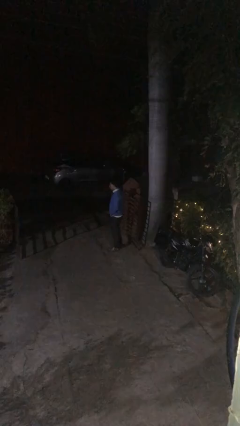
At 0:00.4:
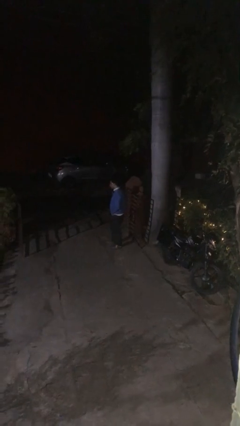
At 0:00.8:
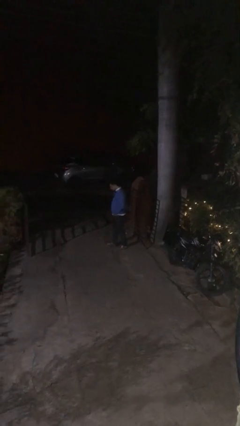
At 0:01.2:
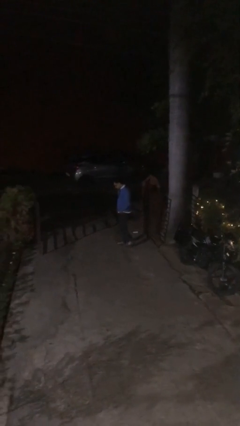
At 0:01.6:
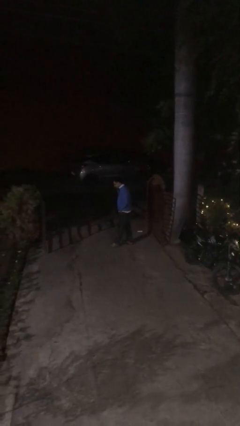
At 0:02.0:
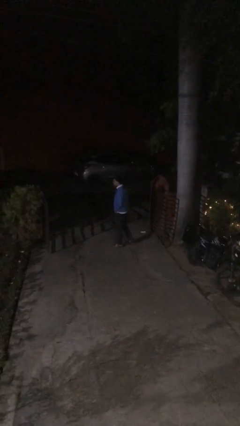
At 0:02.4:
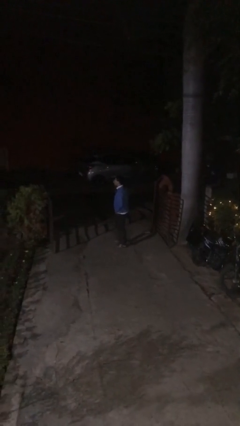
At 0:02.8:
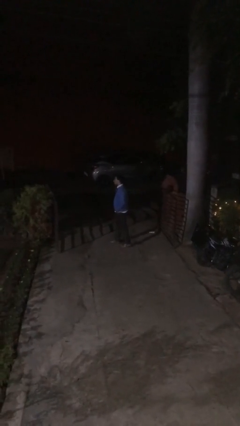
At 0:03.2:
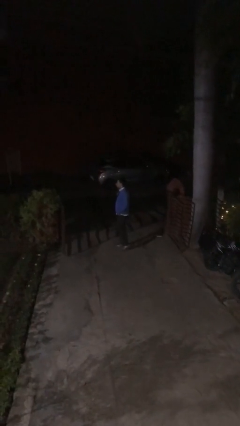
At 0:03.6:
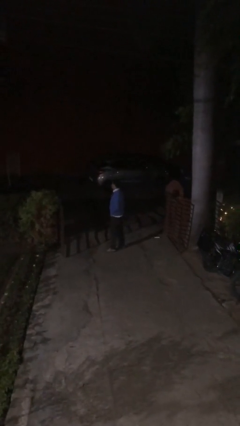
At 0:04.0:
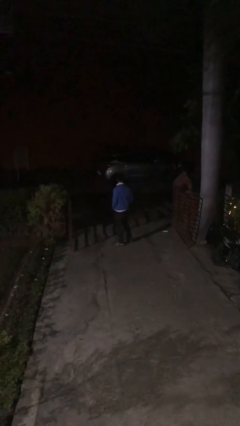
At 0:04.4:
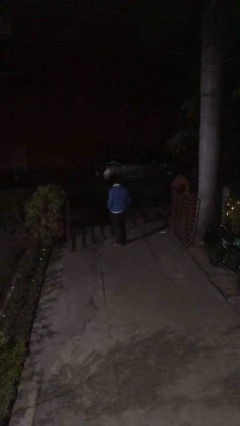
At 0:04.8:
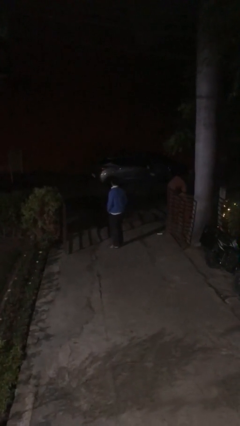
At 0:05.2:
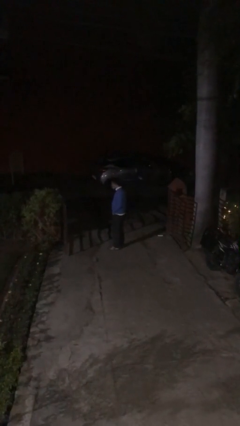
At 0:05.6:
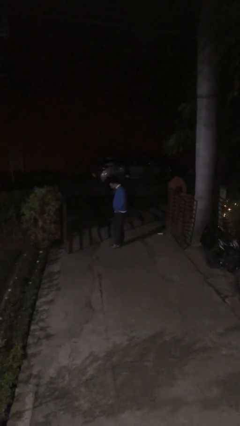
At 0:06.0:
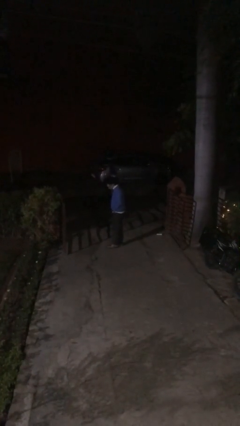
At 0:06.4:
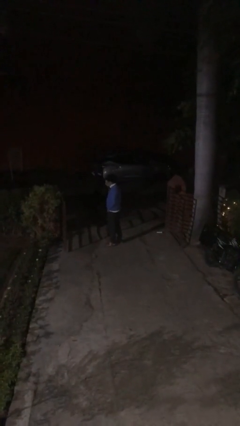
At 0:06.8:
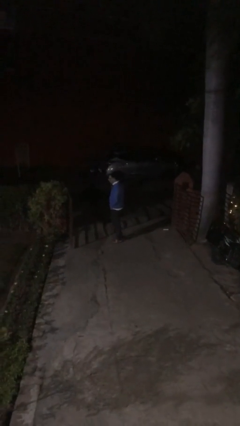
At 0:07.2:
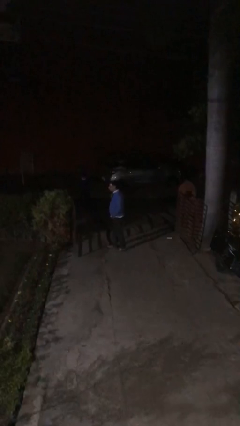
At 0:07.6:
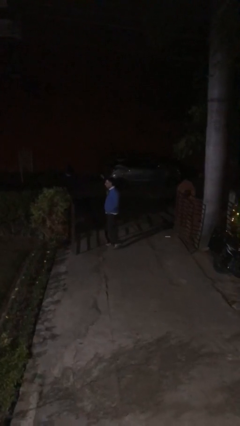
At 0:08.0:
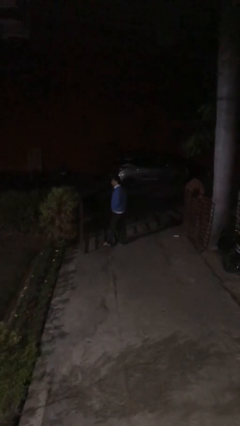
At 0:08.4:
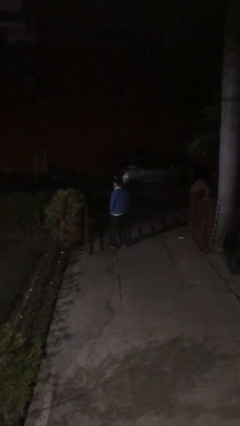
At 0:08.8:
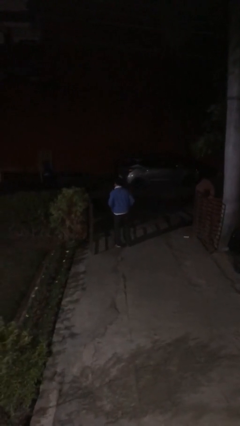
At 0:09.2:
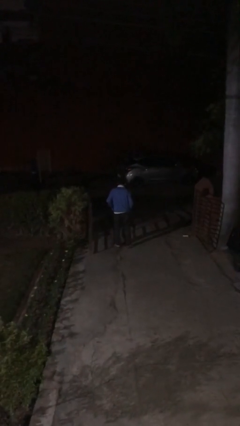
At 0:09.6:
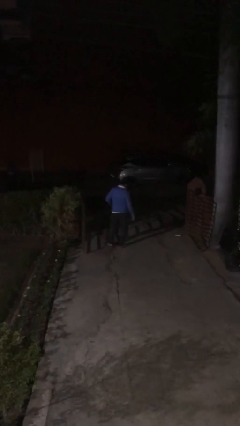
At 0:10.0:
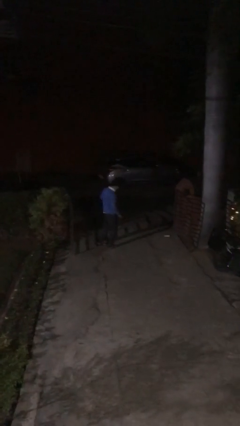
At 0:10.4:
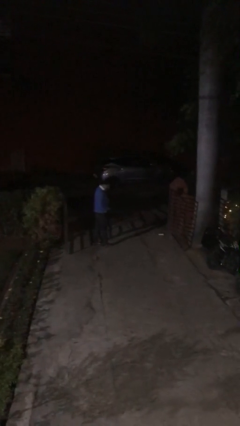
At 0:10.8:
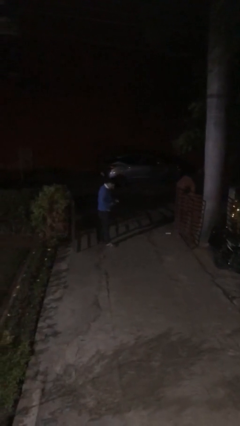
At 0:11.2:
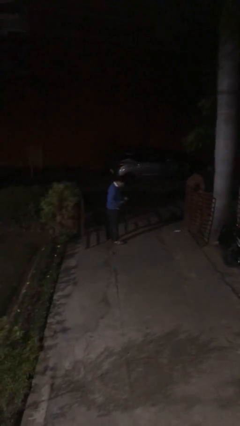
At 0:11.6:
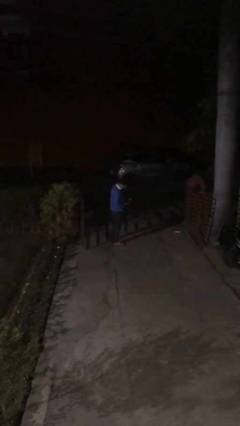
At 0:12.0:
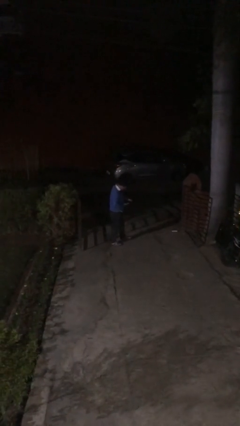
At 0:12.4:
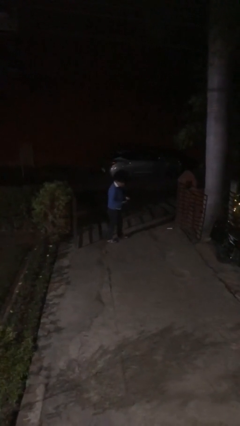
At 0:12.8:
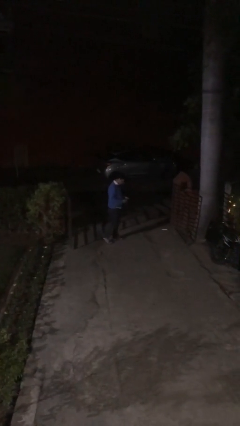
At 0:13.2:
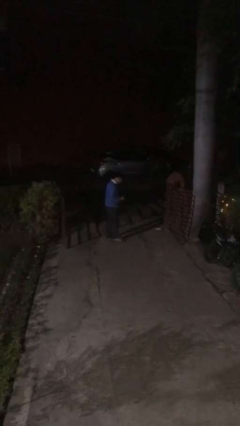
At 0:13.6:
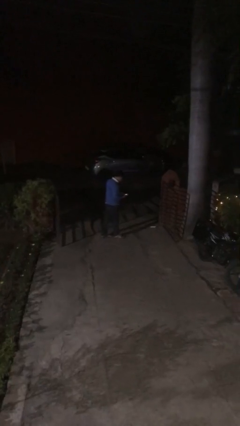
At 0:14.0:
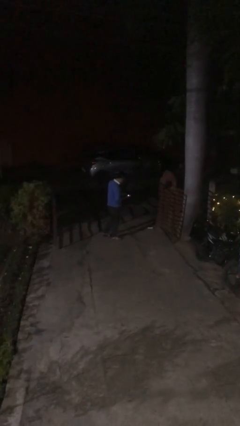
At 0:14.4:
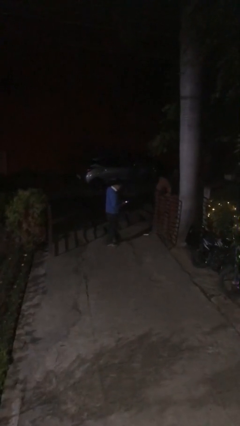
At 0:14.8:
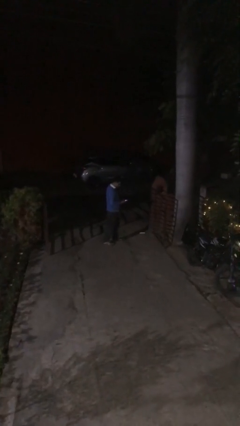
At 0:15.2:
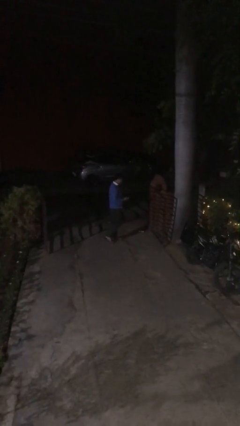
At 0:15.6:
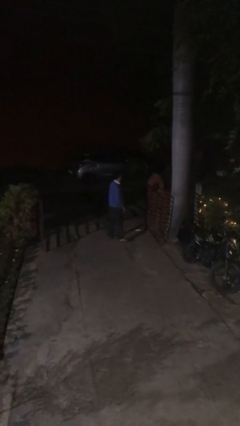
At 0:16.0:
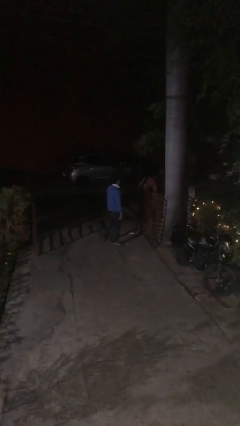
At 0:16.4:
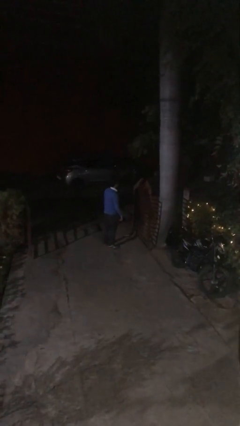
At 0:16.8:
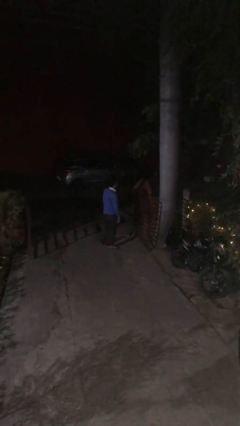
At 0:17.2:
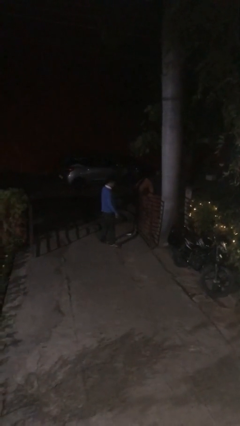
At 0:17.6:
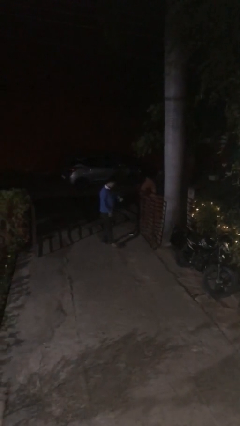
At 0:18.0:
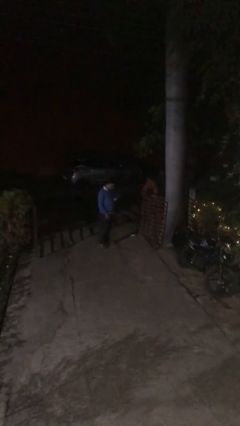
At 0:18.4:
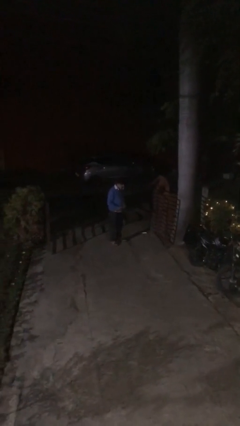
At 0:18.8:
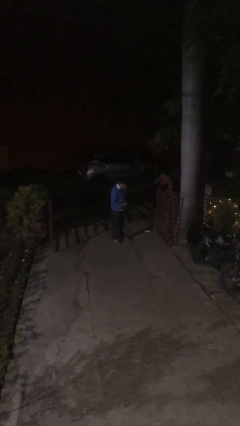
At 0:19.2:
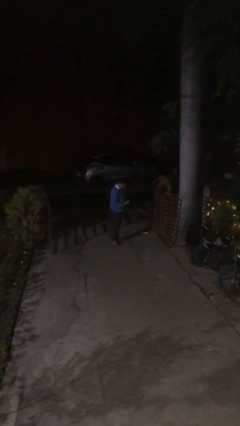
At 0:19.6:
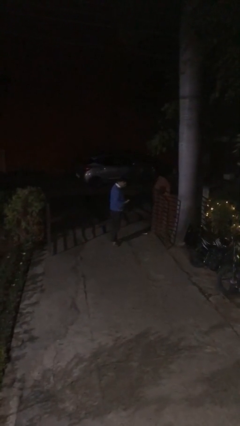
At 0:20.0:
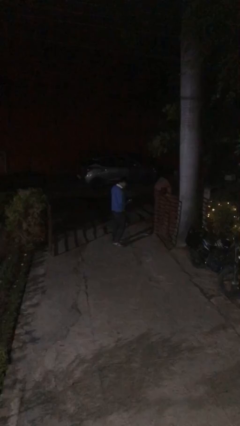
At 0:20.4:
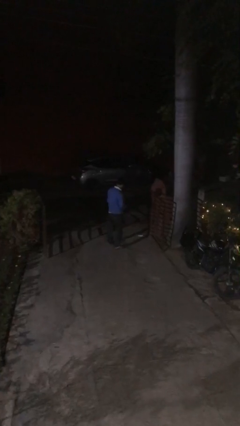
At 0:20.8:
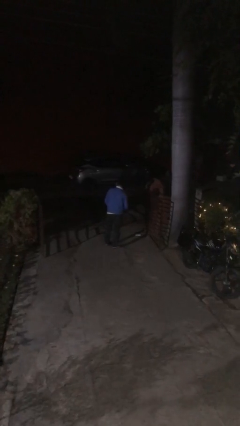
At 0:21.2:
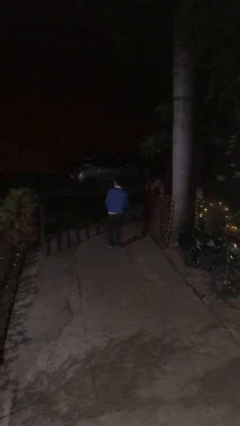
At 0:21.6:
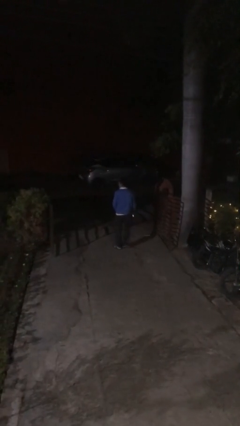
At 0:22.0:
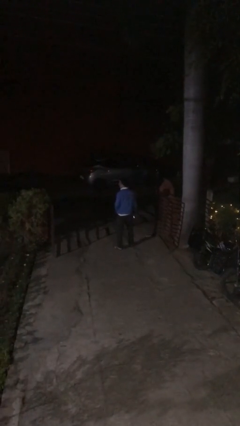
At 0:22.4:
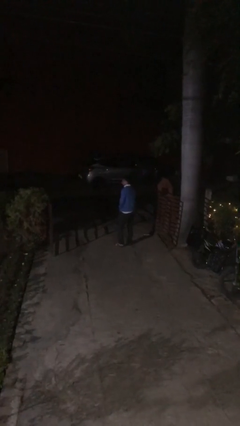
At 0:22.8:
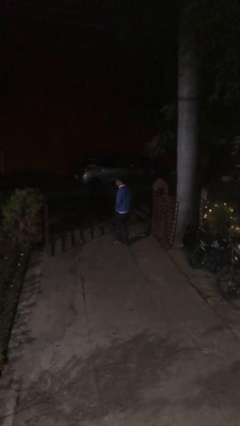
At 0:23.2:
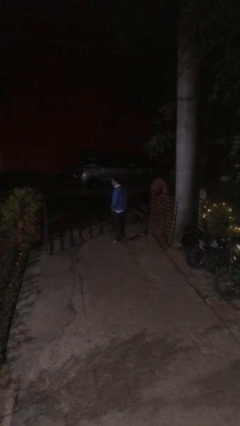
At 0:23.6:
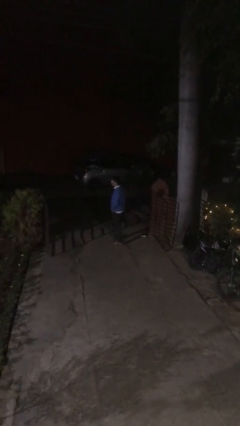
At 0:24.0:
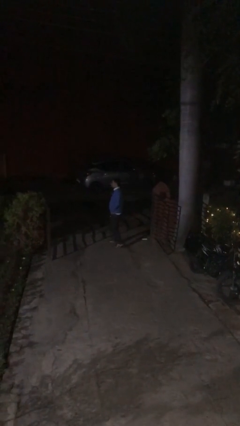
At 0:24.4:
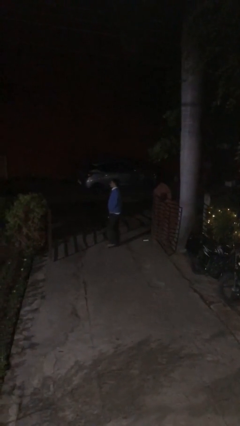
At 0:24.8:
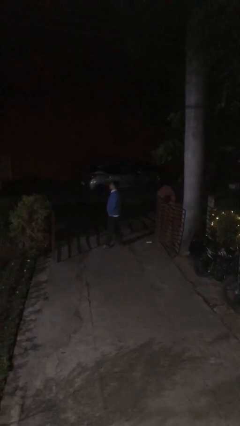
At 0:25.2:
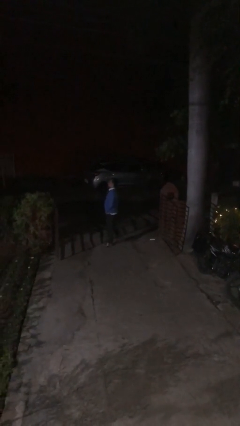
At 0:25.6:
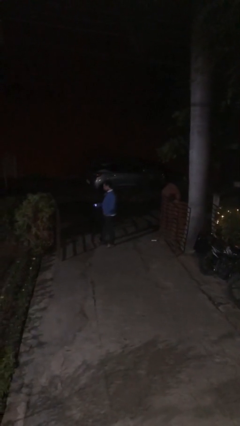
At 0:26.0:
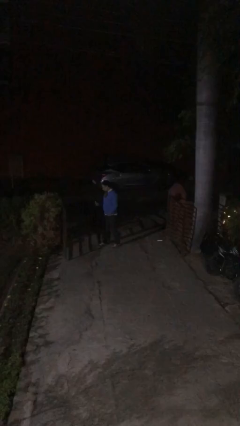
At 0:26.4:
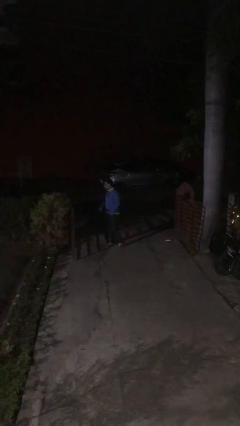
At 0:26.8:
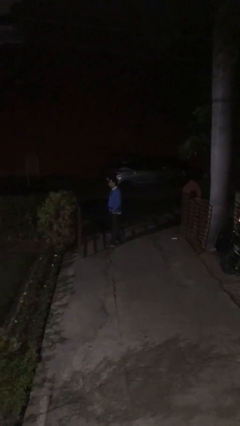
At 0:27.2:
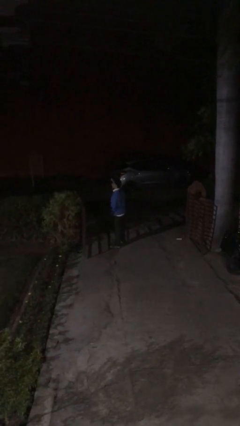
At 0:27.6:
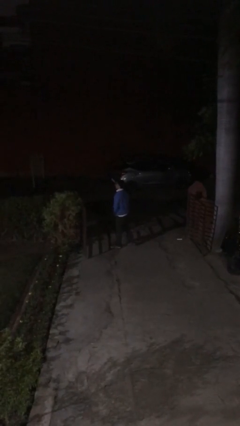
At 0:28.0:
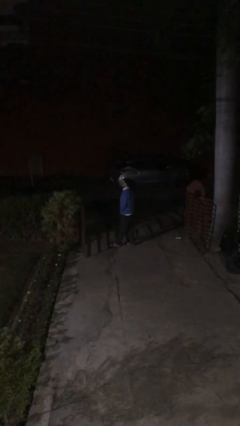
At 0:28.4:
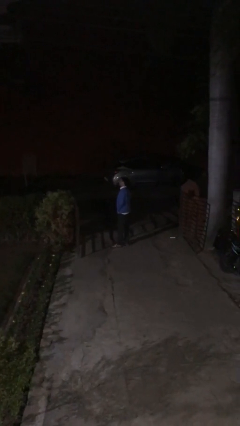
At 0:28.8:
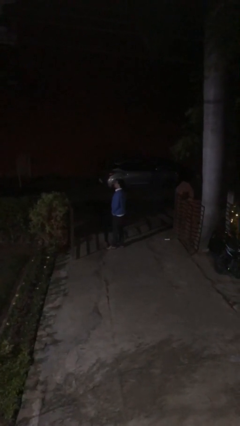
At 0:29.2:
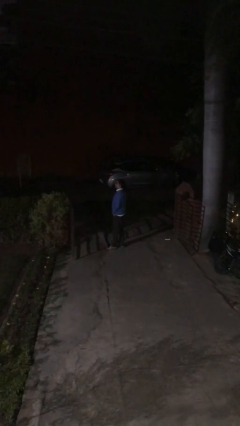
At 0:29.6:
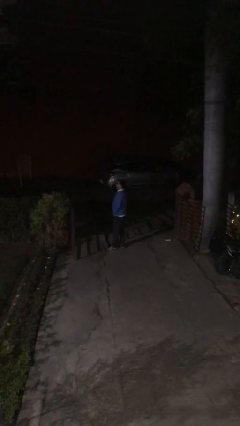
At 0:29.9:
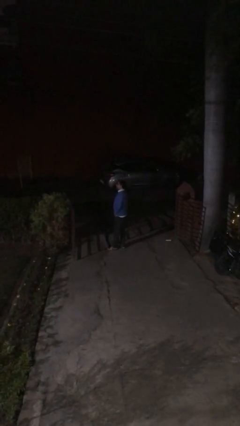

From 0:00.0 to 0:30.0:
person walks

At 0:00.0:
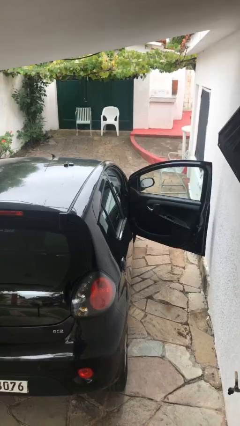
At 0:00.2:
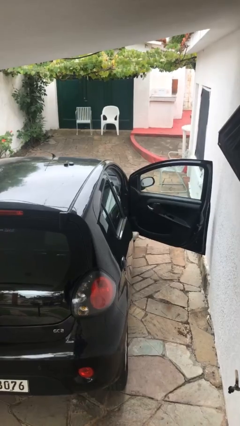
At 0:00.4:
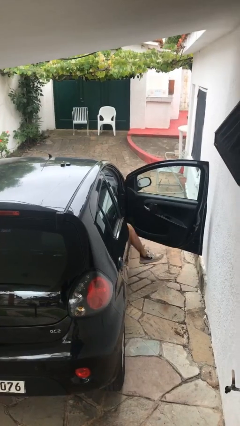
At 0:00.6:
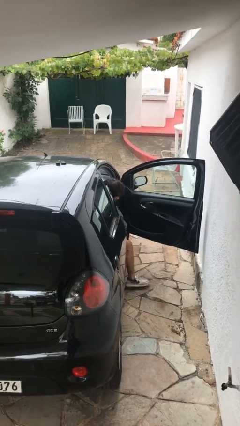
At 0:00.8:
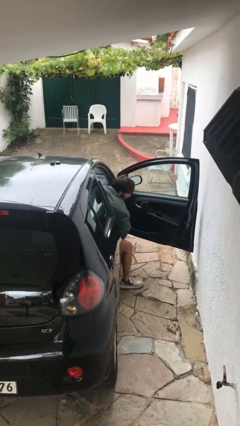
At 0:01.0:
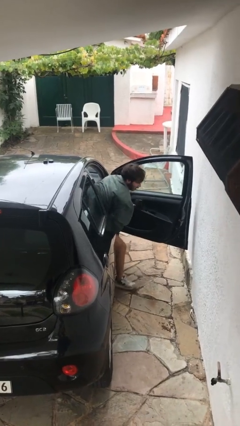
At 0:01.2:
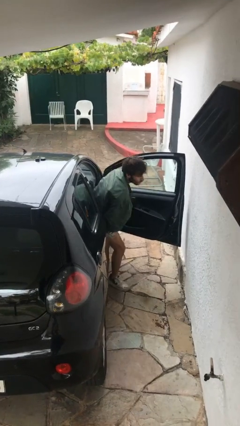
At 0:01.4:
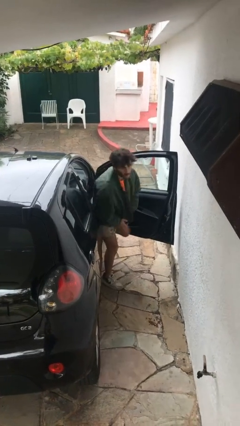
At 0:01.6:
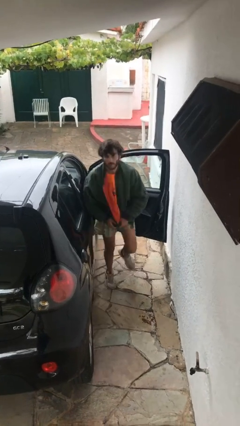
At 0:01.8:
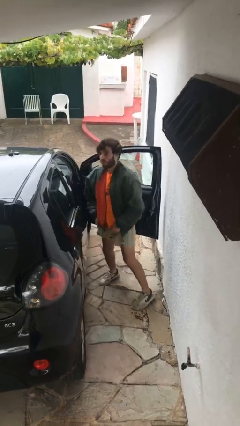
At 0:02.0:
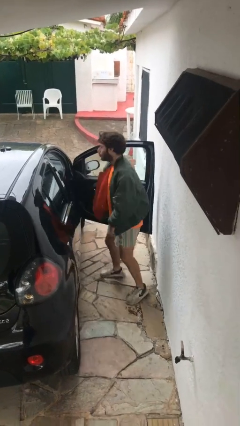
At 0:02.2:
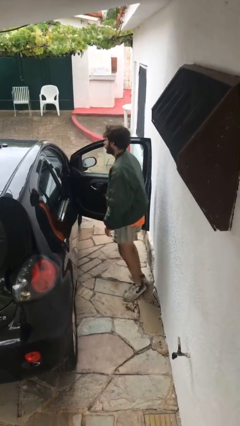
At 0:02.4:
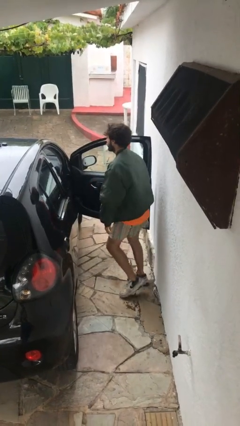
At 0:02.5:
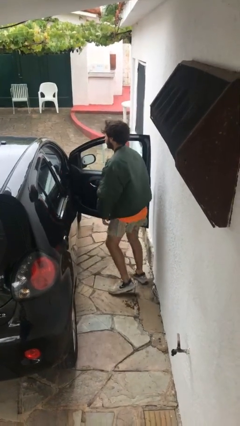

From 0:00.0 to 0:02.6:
person exits car

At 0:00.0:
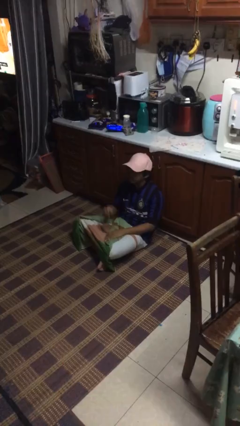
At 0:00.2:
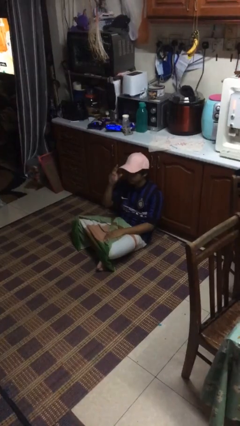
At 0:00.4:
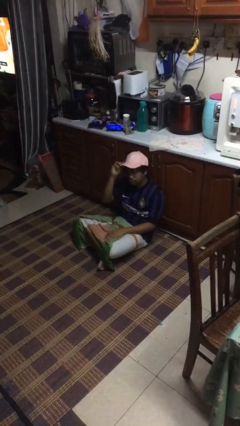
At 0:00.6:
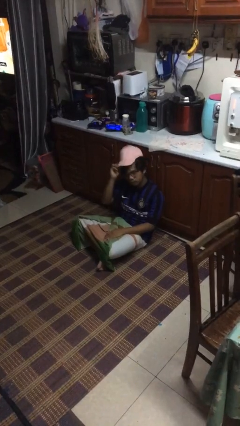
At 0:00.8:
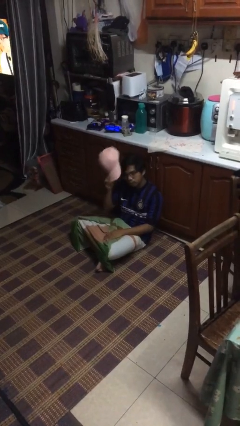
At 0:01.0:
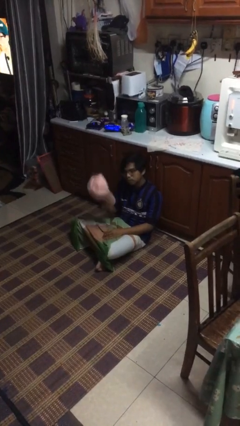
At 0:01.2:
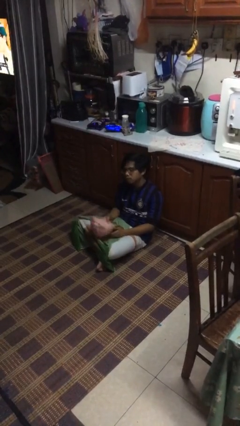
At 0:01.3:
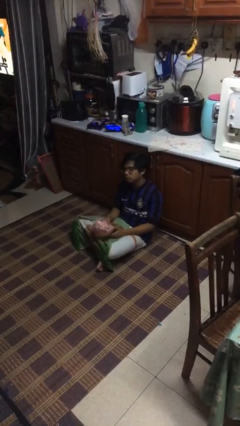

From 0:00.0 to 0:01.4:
person takes off hat
